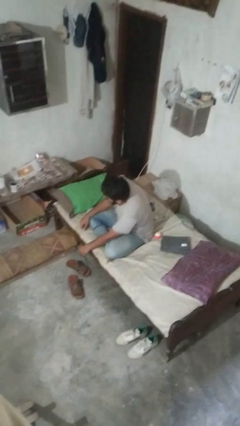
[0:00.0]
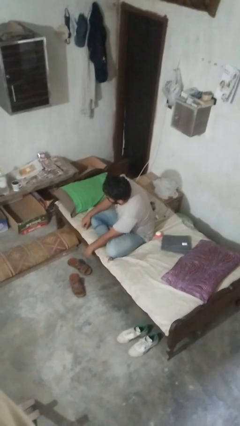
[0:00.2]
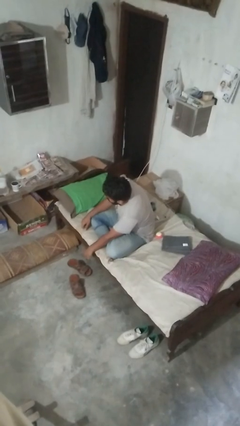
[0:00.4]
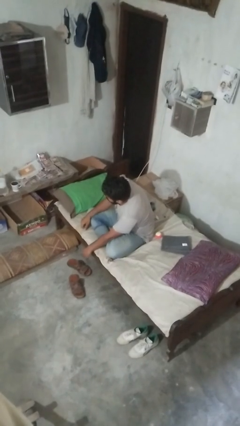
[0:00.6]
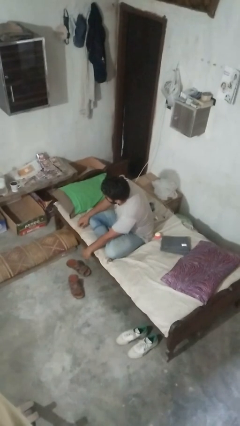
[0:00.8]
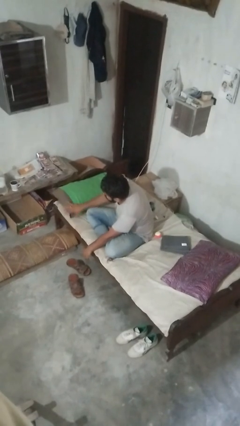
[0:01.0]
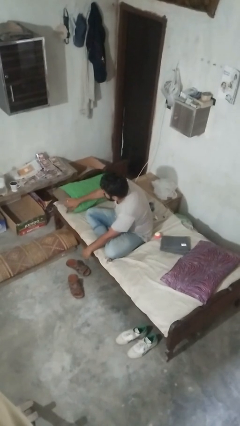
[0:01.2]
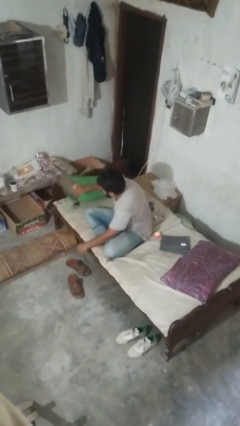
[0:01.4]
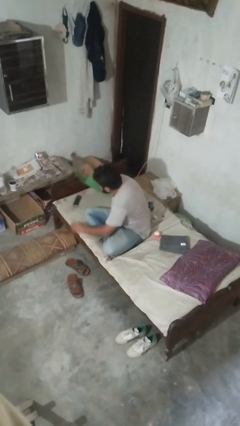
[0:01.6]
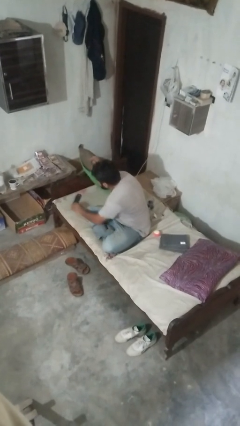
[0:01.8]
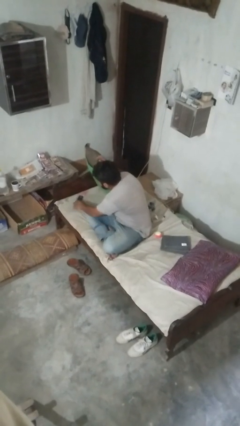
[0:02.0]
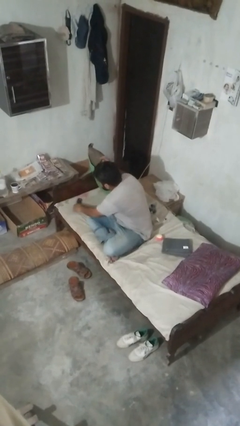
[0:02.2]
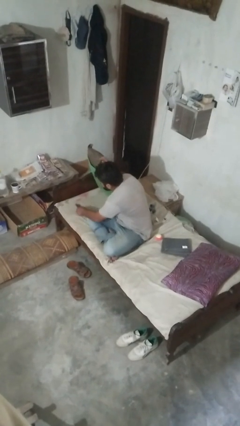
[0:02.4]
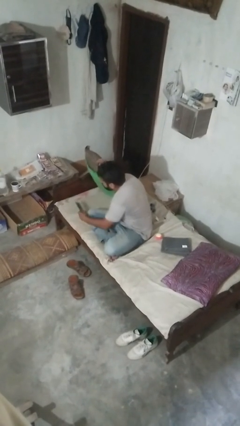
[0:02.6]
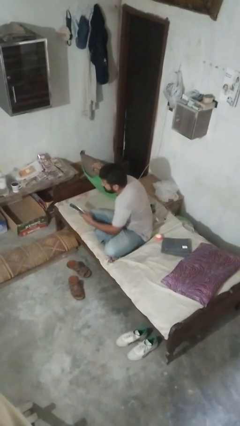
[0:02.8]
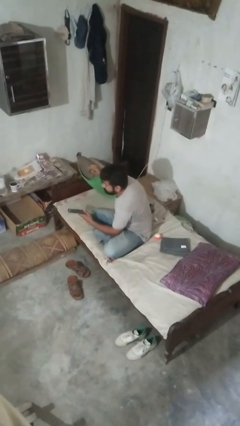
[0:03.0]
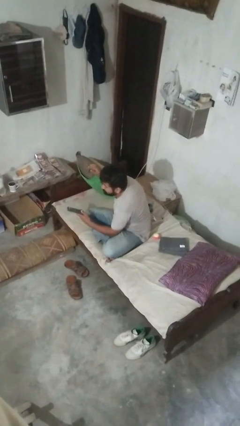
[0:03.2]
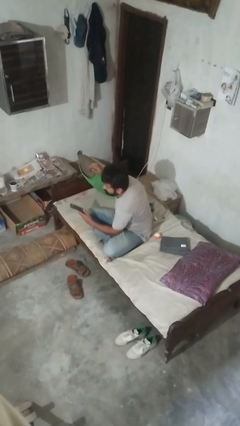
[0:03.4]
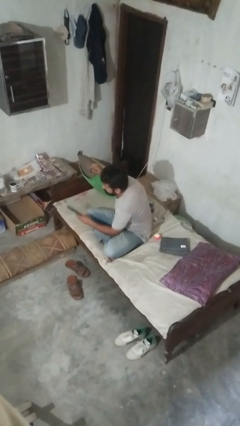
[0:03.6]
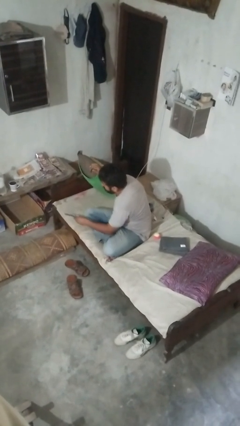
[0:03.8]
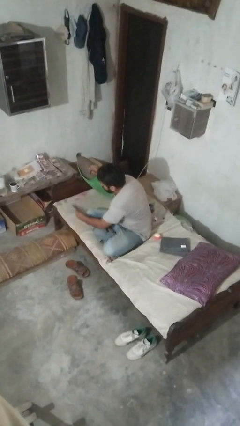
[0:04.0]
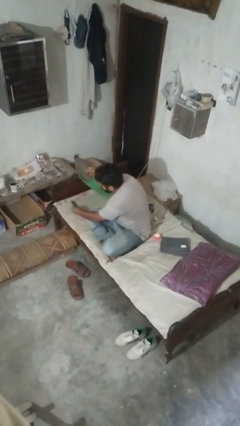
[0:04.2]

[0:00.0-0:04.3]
person searches in couch

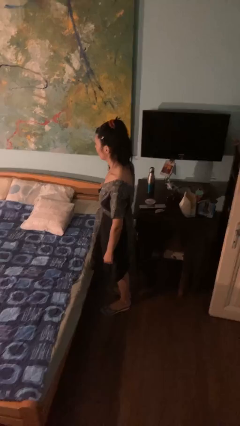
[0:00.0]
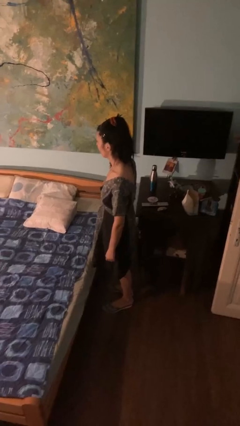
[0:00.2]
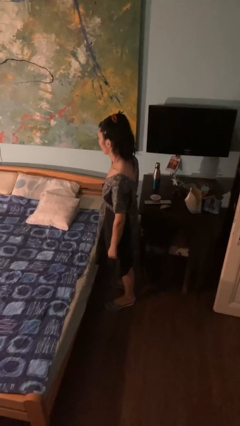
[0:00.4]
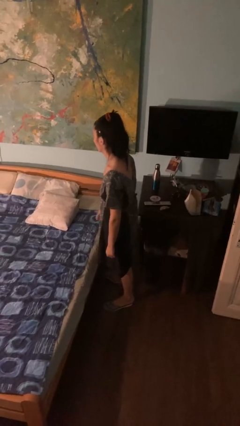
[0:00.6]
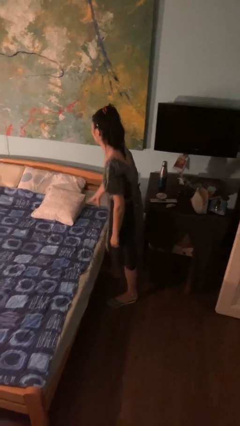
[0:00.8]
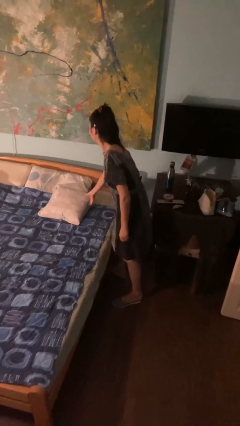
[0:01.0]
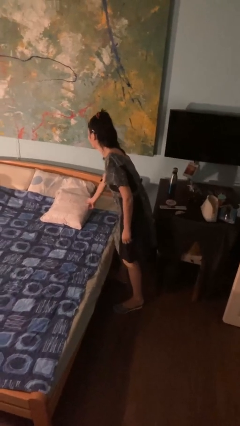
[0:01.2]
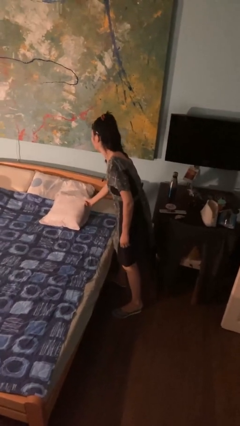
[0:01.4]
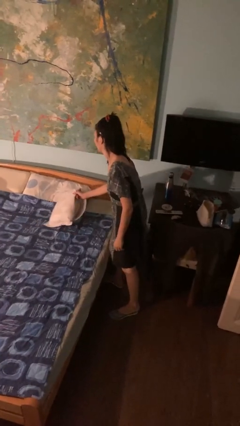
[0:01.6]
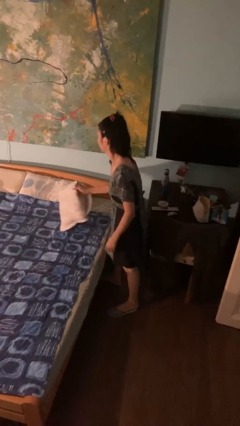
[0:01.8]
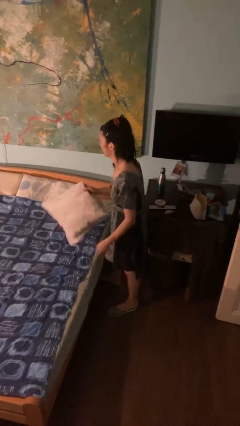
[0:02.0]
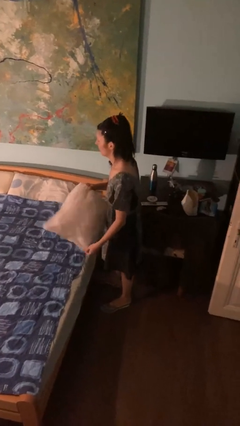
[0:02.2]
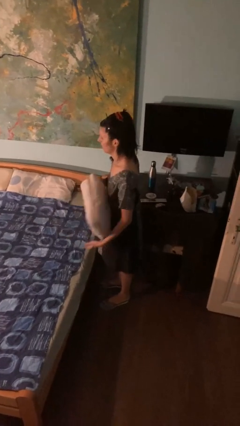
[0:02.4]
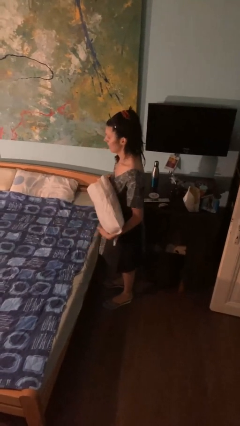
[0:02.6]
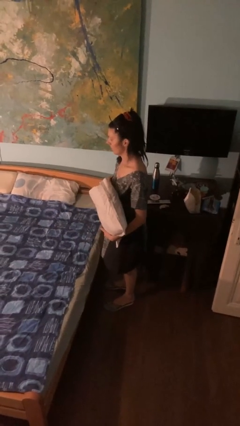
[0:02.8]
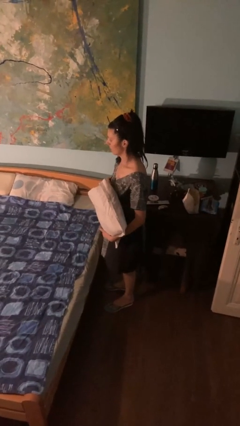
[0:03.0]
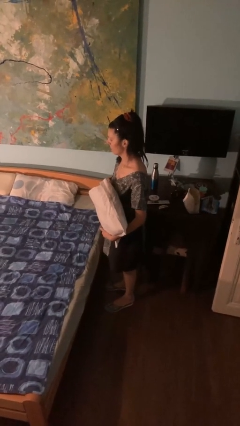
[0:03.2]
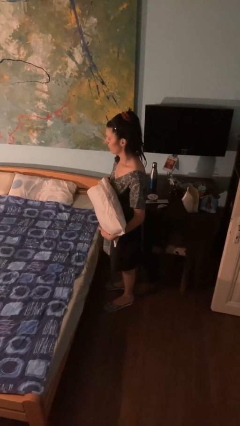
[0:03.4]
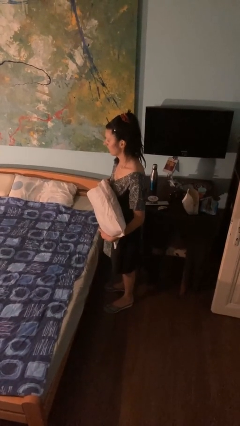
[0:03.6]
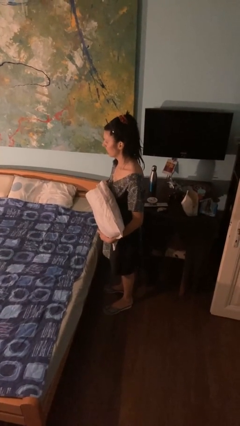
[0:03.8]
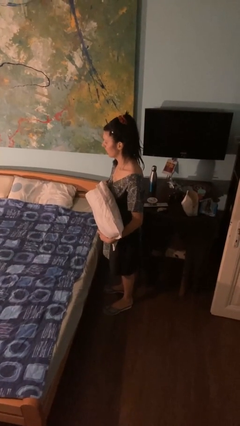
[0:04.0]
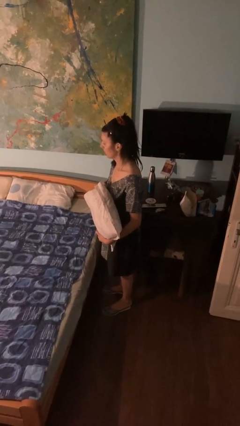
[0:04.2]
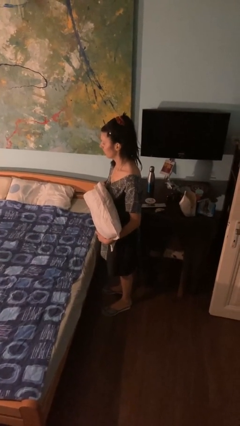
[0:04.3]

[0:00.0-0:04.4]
person picks up object from bed

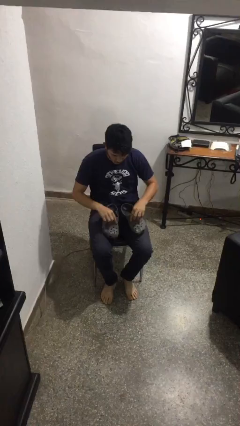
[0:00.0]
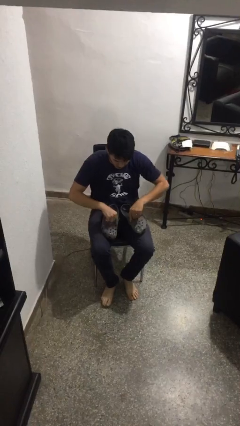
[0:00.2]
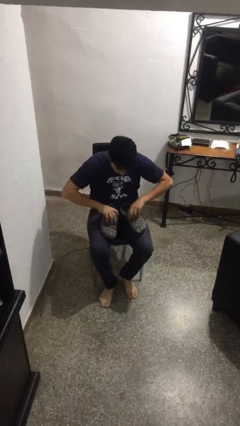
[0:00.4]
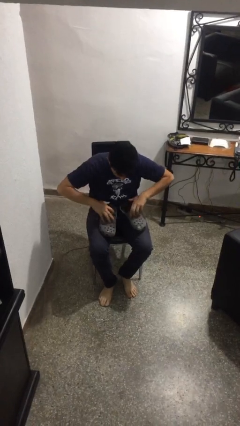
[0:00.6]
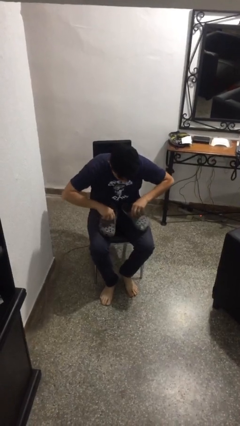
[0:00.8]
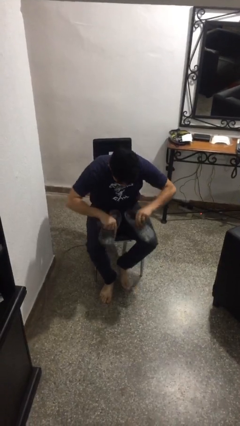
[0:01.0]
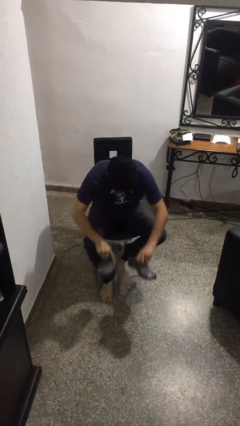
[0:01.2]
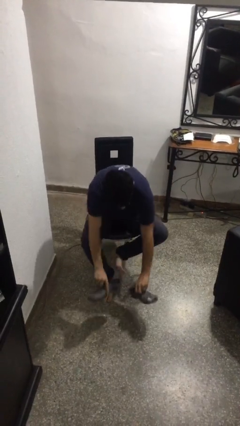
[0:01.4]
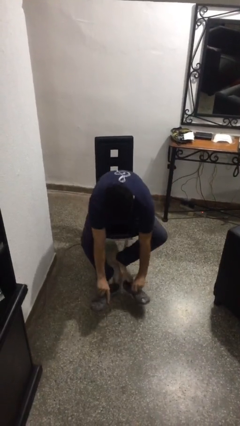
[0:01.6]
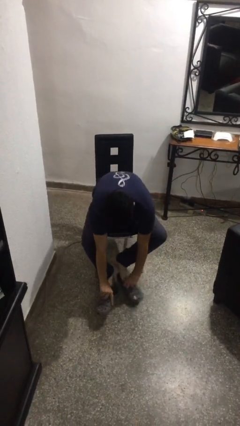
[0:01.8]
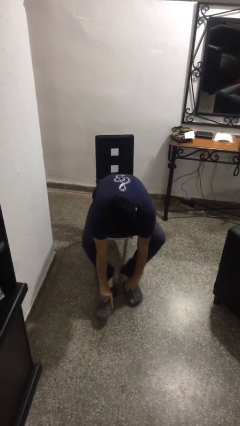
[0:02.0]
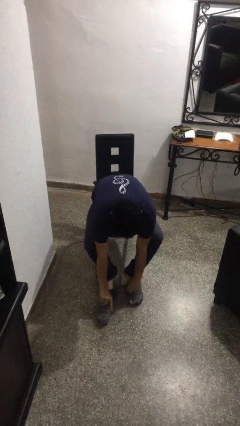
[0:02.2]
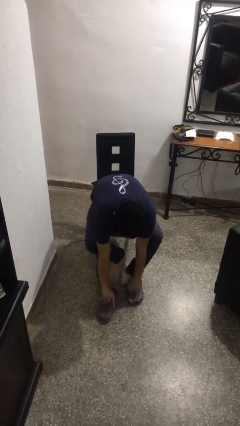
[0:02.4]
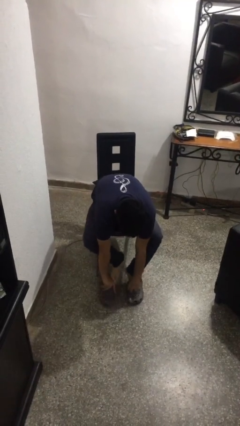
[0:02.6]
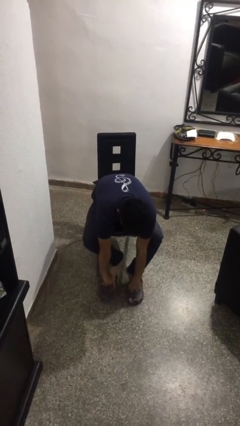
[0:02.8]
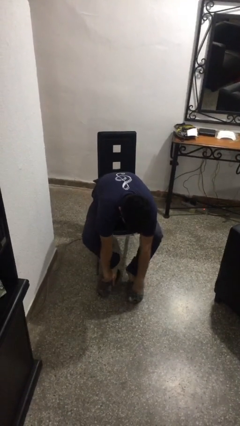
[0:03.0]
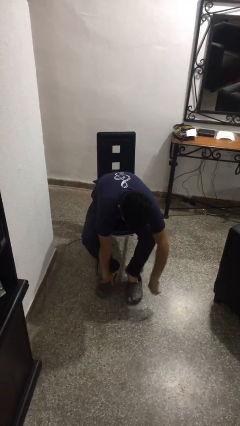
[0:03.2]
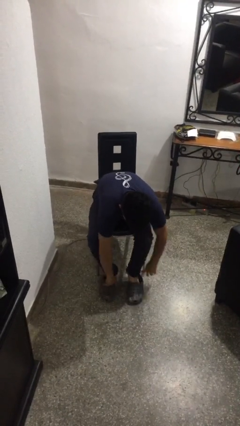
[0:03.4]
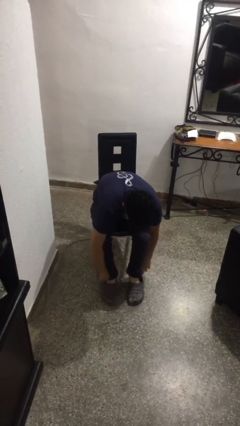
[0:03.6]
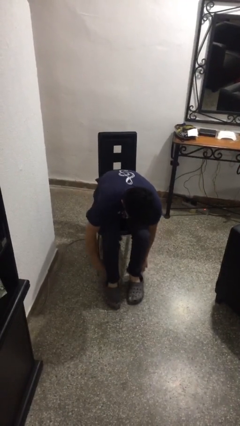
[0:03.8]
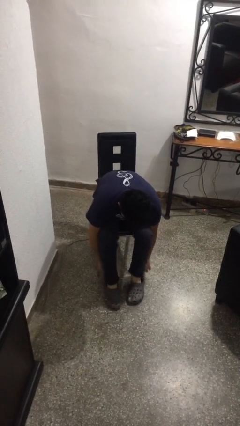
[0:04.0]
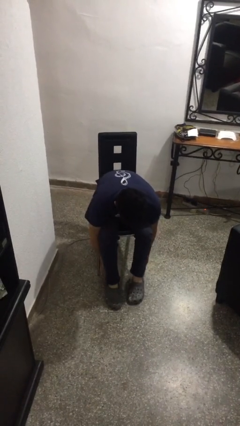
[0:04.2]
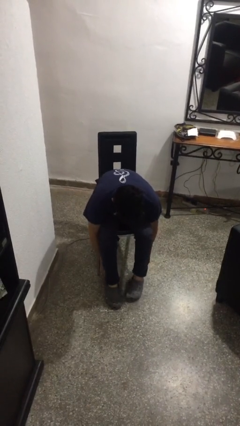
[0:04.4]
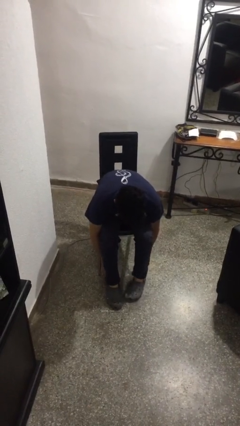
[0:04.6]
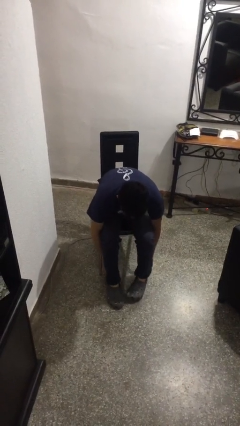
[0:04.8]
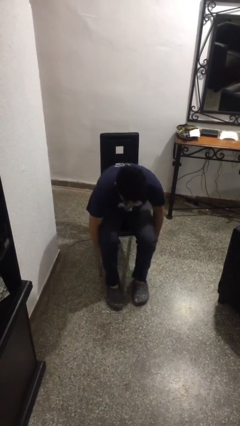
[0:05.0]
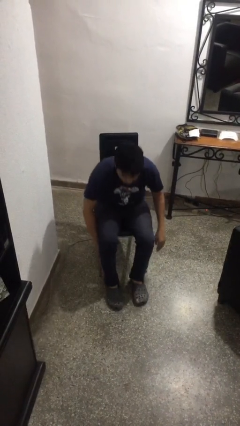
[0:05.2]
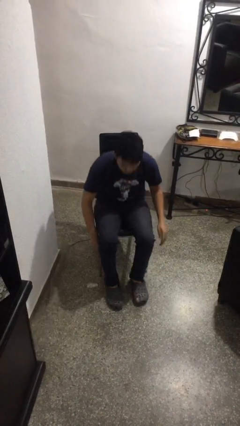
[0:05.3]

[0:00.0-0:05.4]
person puts on shoes

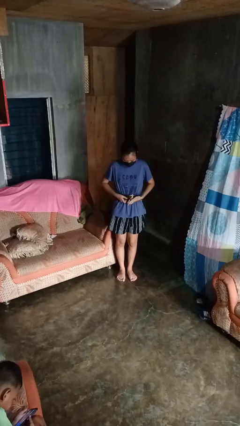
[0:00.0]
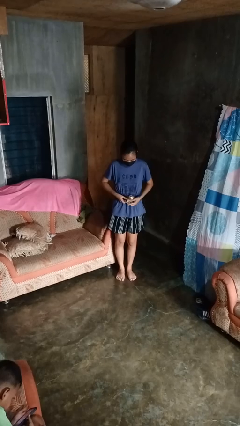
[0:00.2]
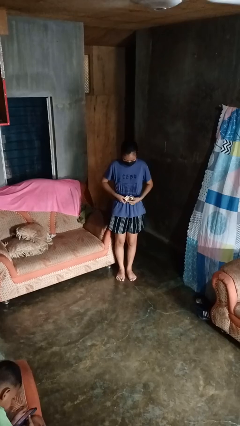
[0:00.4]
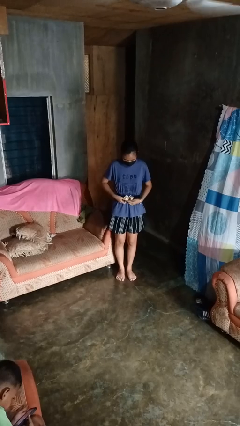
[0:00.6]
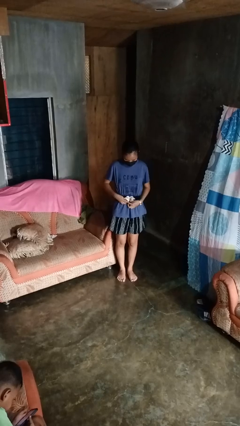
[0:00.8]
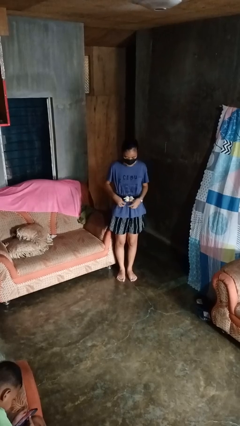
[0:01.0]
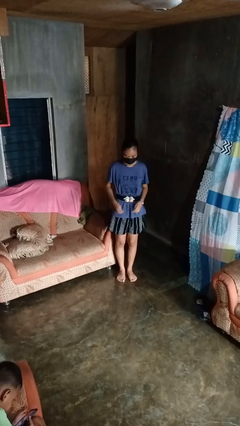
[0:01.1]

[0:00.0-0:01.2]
person puts on belt

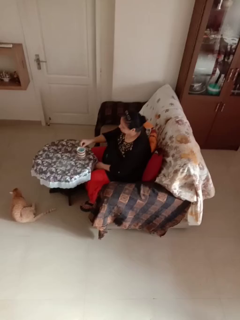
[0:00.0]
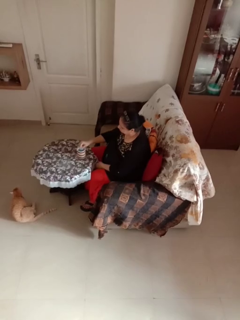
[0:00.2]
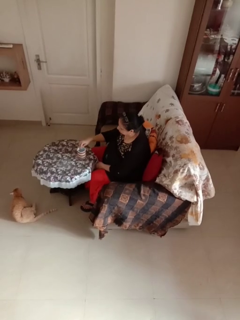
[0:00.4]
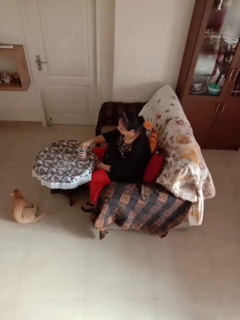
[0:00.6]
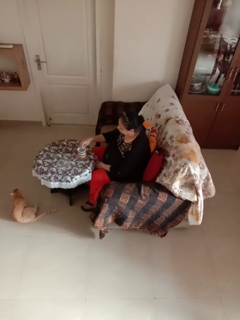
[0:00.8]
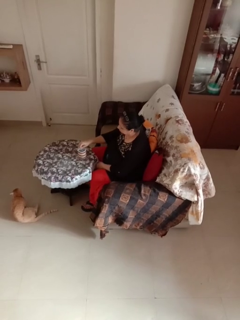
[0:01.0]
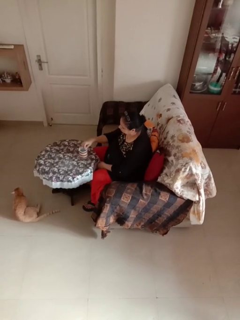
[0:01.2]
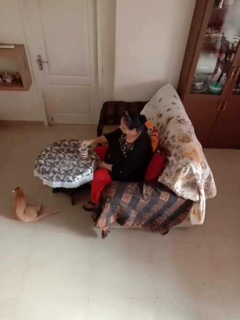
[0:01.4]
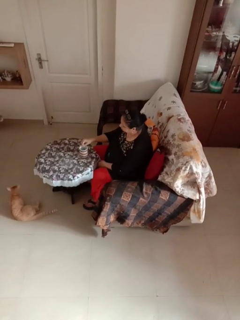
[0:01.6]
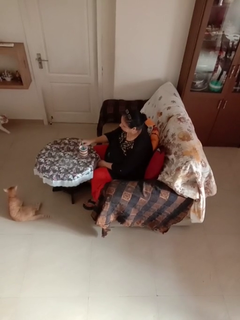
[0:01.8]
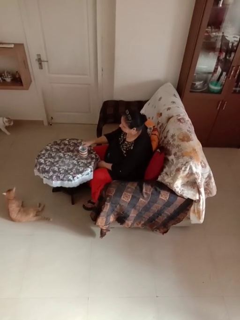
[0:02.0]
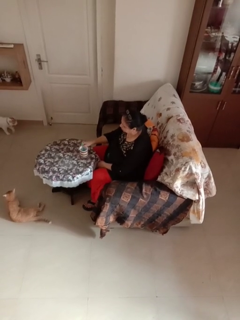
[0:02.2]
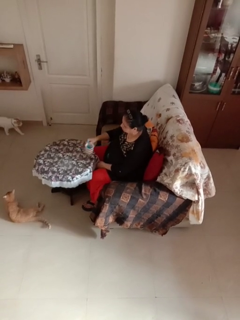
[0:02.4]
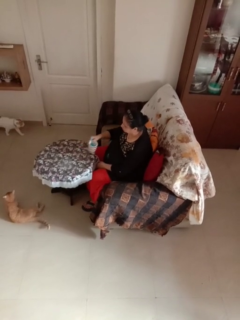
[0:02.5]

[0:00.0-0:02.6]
person stirs mug

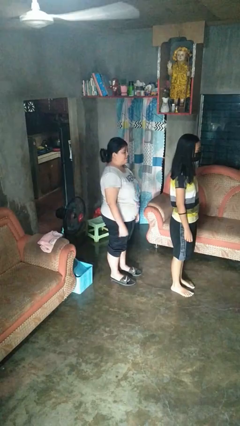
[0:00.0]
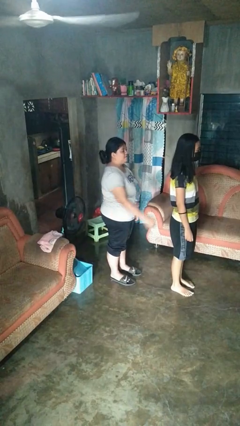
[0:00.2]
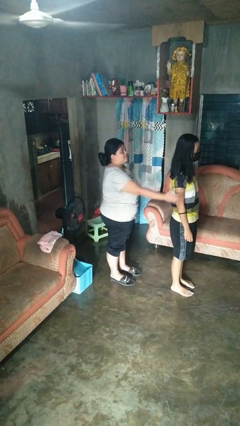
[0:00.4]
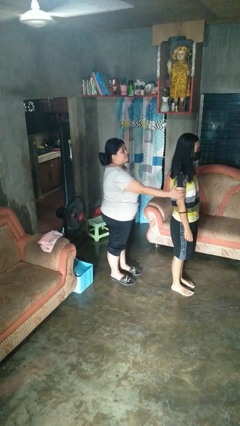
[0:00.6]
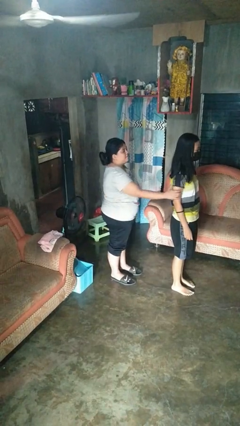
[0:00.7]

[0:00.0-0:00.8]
person grabs person by shoulder
